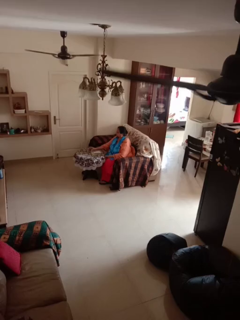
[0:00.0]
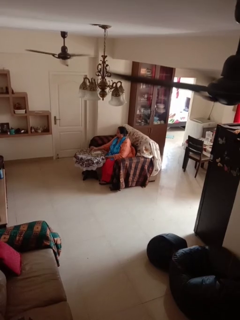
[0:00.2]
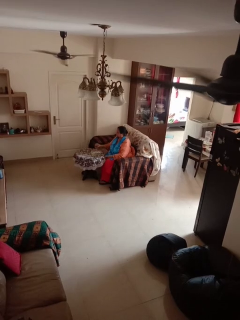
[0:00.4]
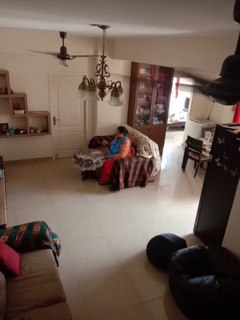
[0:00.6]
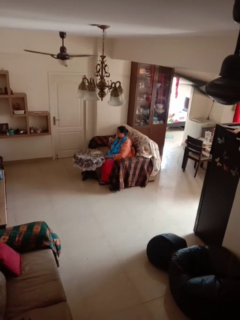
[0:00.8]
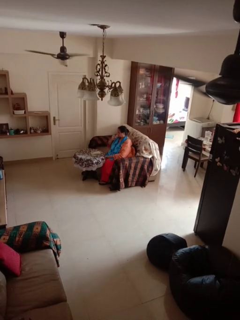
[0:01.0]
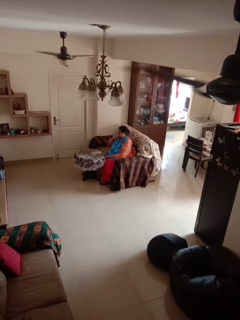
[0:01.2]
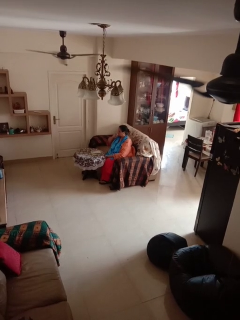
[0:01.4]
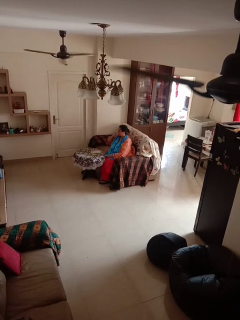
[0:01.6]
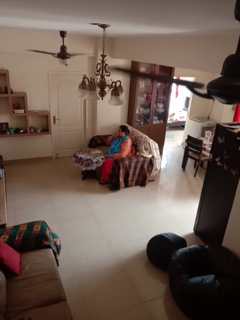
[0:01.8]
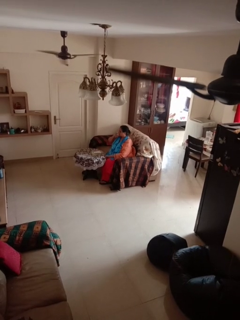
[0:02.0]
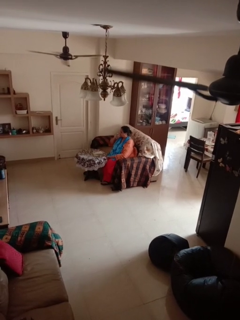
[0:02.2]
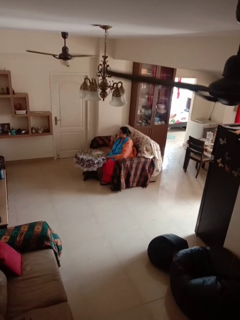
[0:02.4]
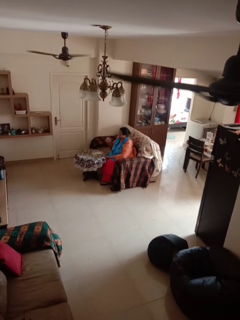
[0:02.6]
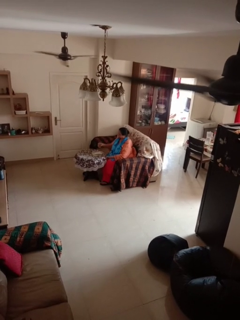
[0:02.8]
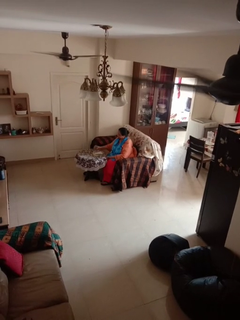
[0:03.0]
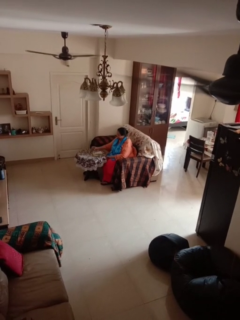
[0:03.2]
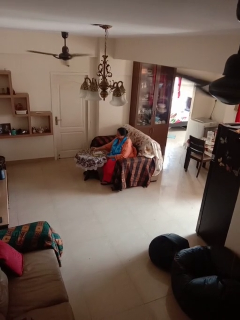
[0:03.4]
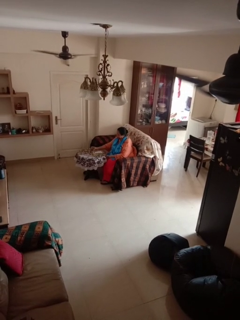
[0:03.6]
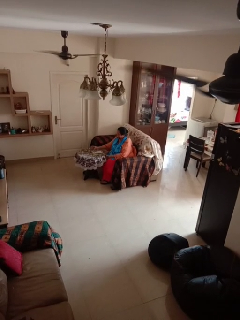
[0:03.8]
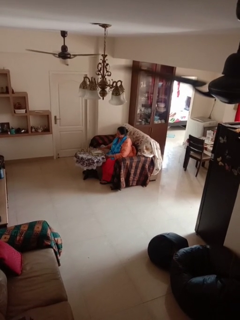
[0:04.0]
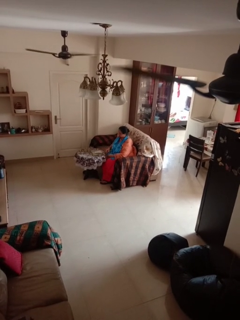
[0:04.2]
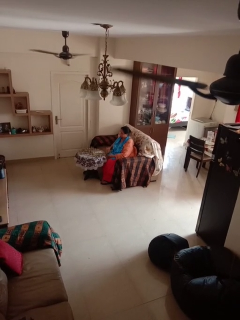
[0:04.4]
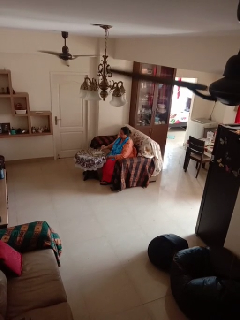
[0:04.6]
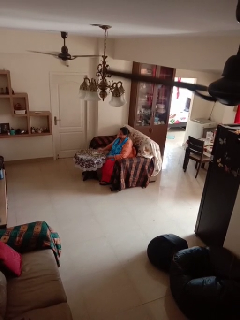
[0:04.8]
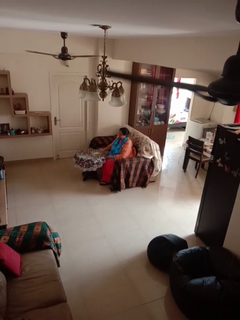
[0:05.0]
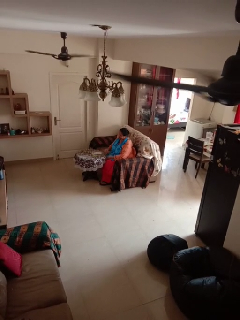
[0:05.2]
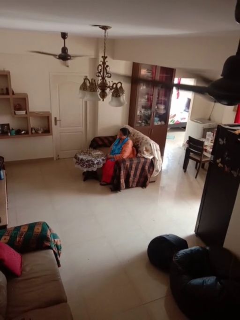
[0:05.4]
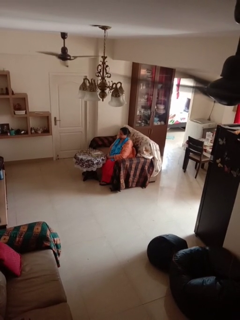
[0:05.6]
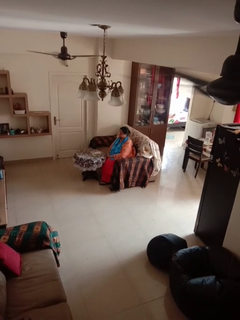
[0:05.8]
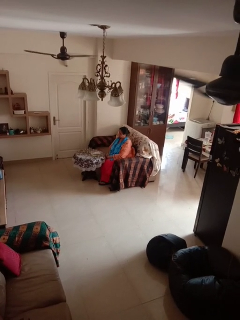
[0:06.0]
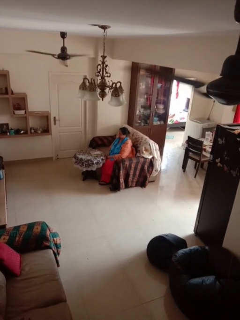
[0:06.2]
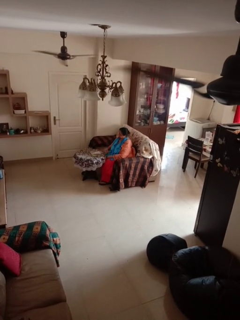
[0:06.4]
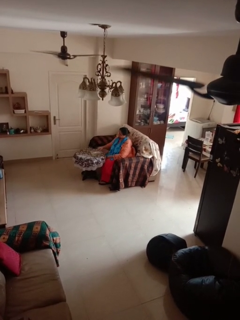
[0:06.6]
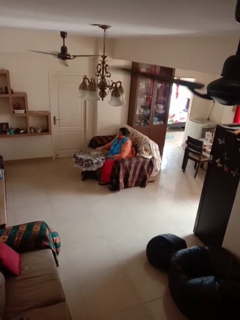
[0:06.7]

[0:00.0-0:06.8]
person drinks from cup

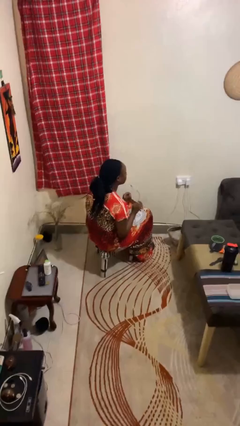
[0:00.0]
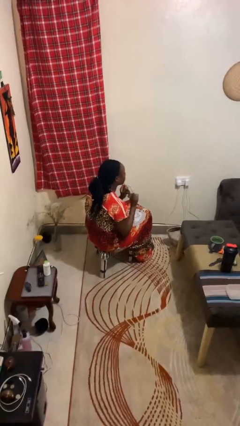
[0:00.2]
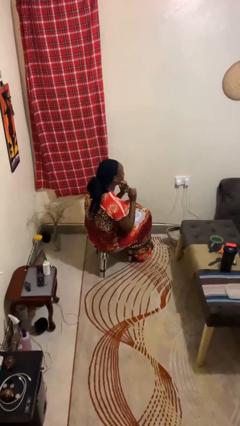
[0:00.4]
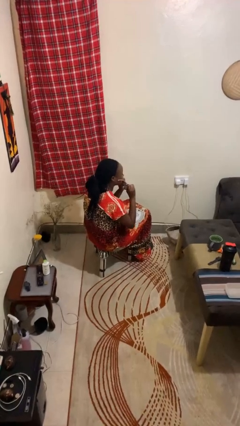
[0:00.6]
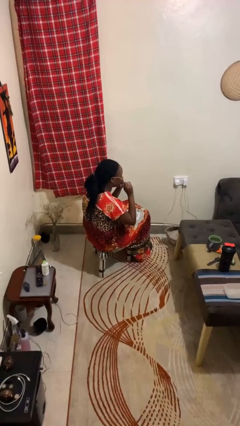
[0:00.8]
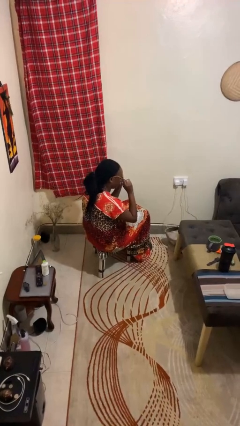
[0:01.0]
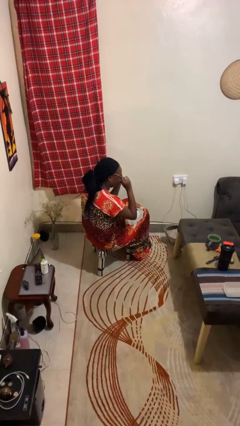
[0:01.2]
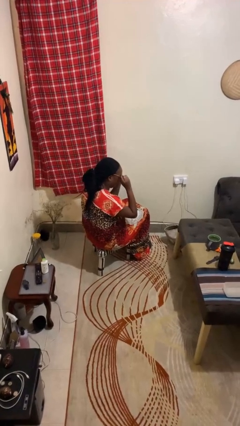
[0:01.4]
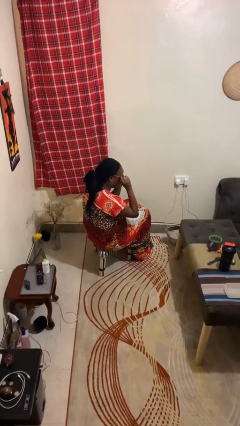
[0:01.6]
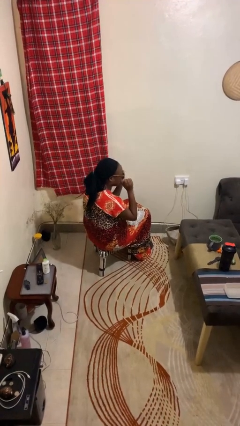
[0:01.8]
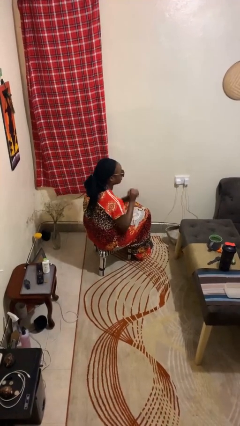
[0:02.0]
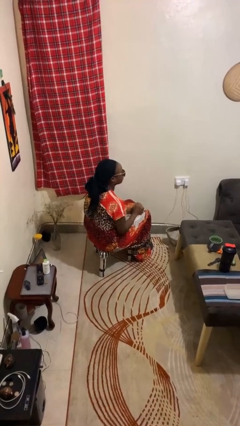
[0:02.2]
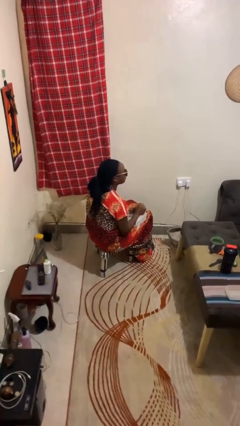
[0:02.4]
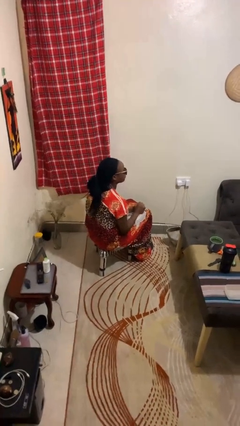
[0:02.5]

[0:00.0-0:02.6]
person puts on sunglasses

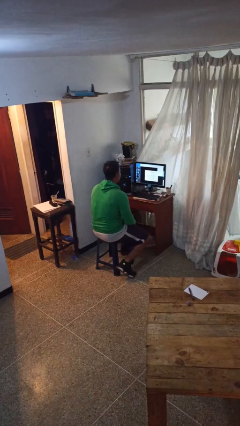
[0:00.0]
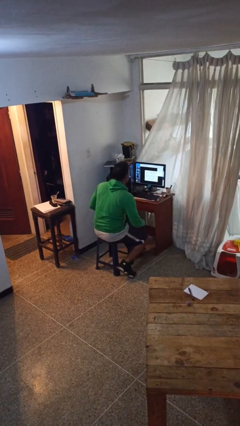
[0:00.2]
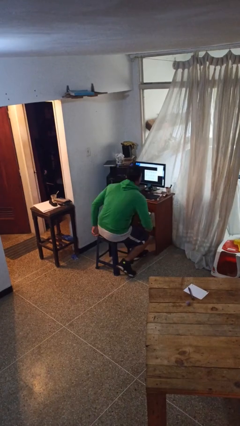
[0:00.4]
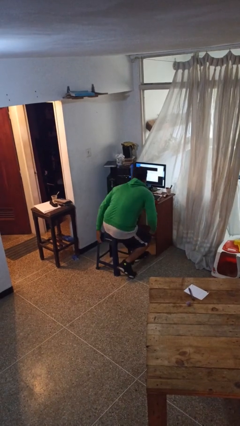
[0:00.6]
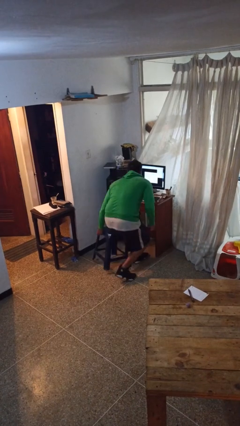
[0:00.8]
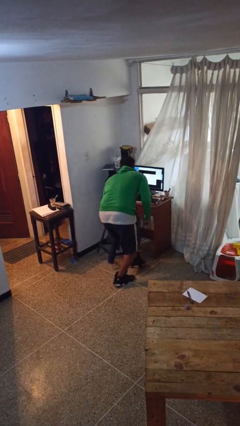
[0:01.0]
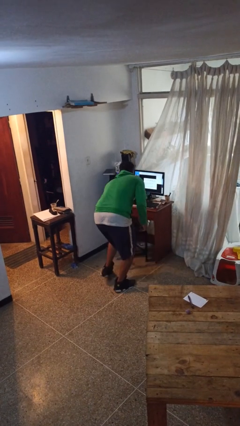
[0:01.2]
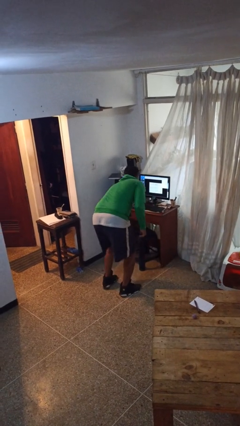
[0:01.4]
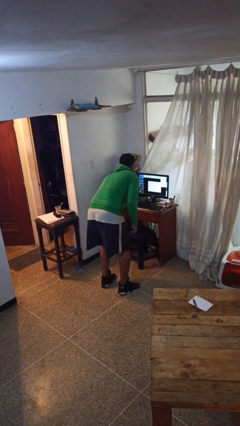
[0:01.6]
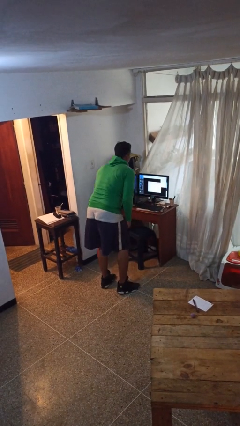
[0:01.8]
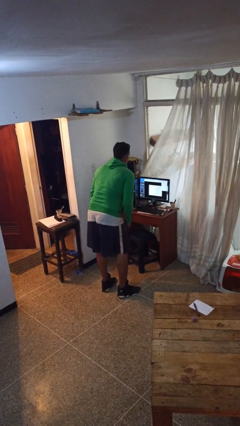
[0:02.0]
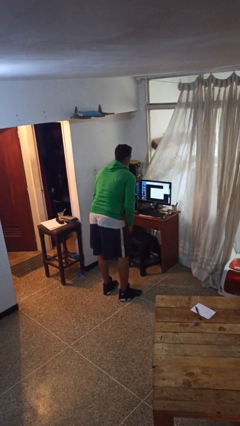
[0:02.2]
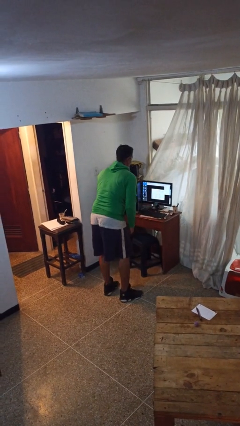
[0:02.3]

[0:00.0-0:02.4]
person stands up

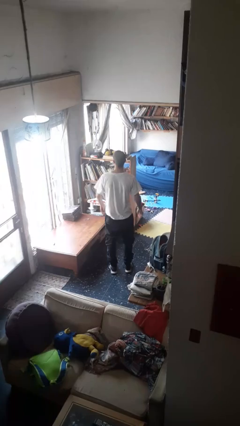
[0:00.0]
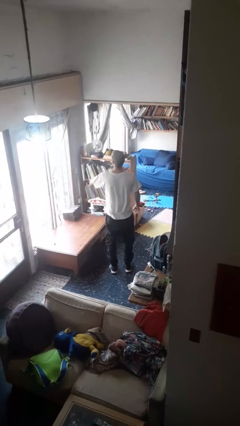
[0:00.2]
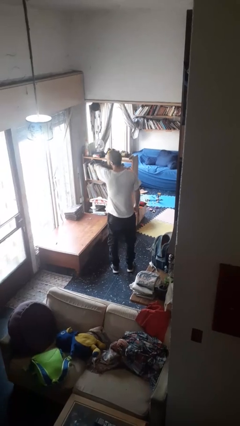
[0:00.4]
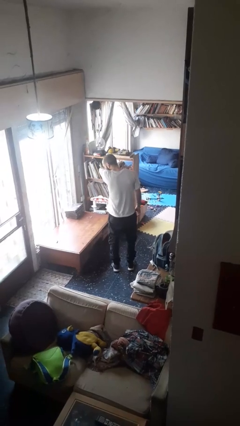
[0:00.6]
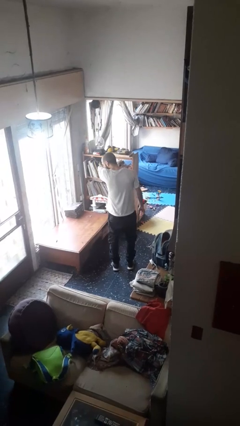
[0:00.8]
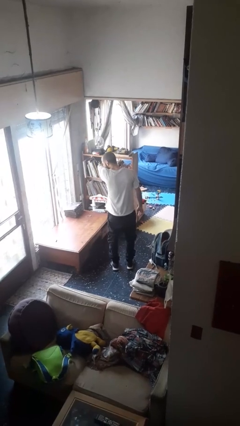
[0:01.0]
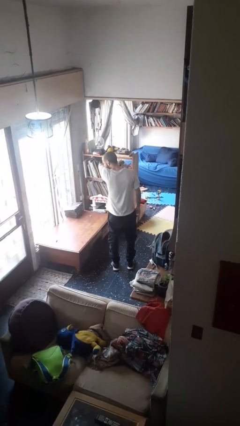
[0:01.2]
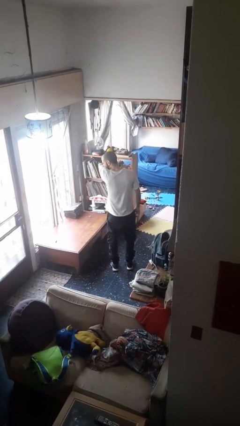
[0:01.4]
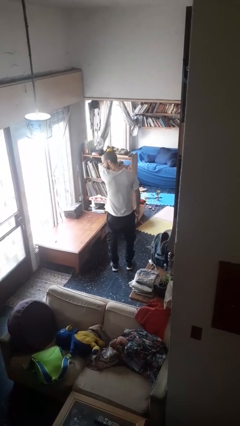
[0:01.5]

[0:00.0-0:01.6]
person sneezes into arm

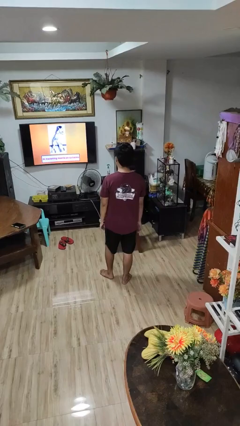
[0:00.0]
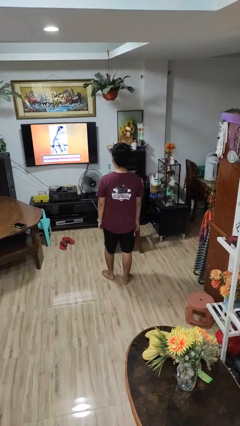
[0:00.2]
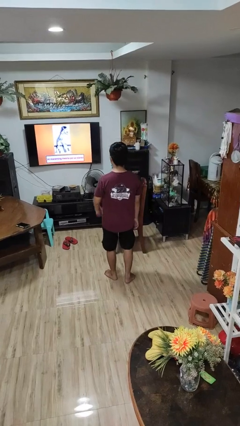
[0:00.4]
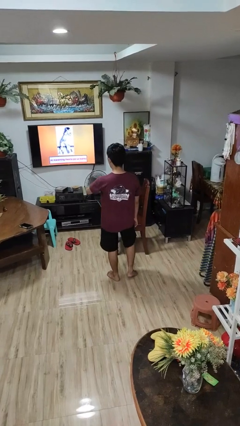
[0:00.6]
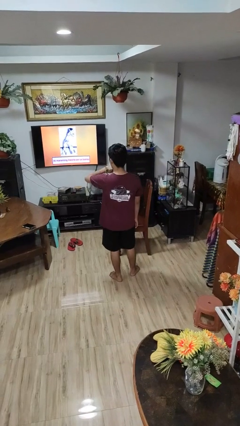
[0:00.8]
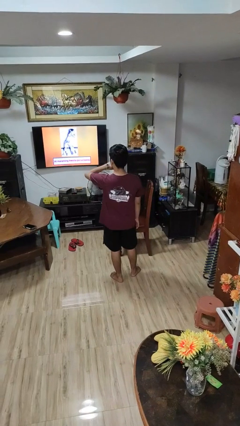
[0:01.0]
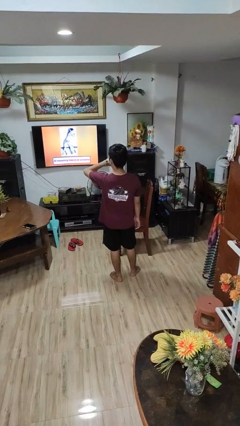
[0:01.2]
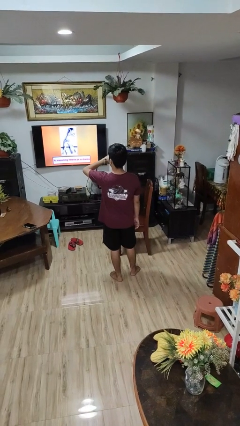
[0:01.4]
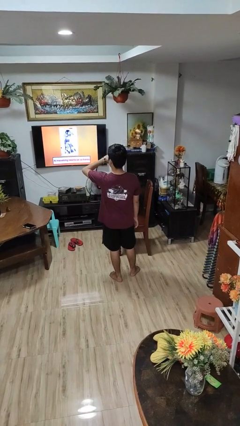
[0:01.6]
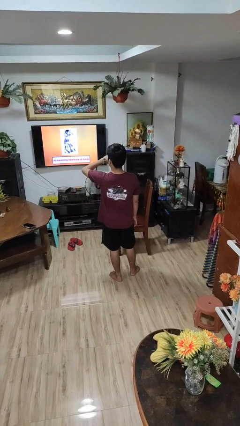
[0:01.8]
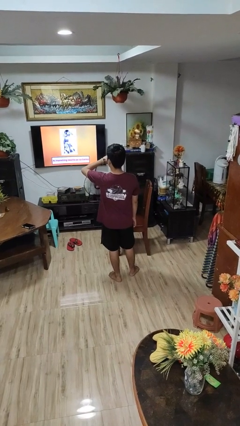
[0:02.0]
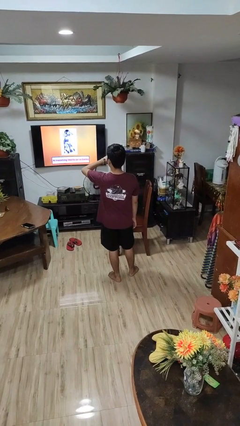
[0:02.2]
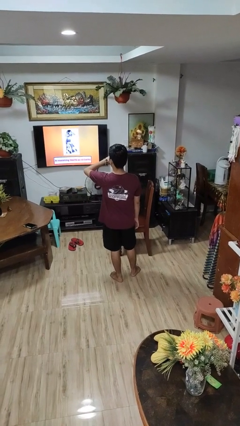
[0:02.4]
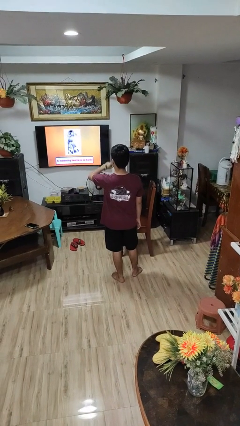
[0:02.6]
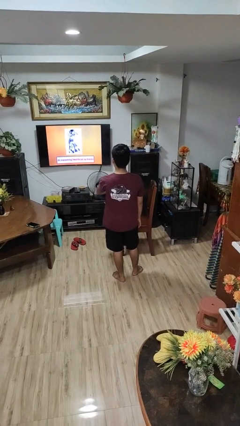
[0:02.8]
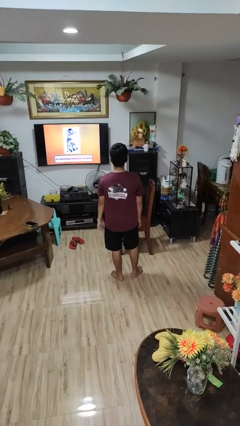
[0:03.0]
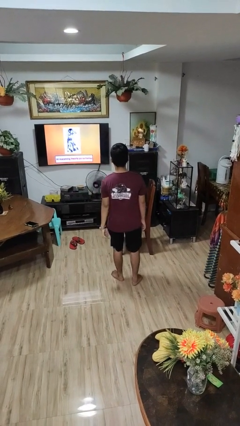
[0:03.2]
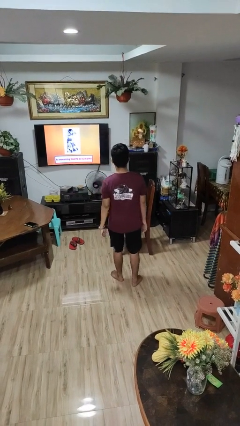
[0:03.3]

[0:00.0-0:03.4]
person looks at wristwatch

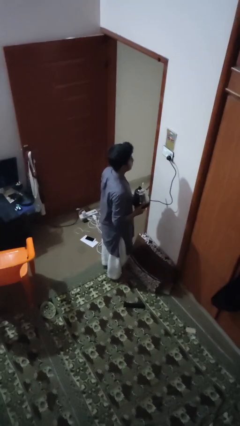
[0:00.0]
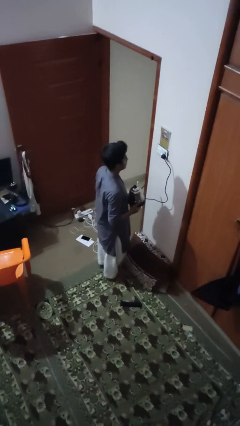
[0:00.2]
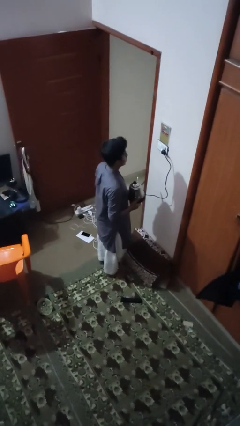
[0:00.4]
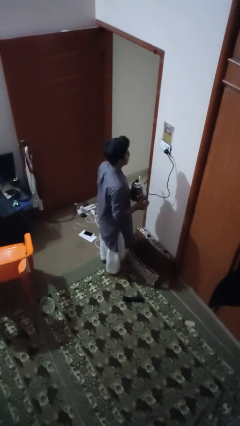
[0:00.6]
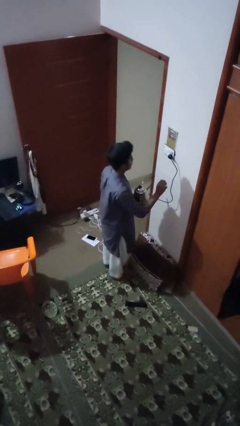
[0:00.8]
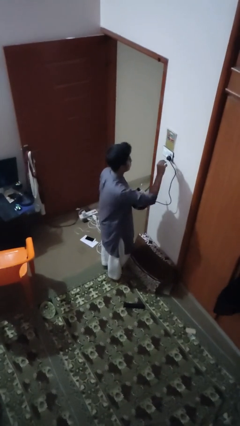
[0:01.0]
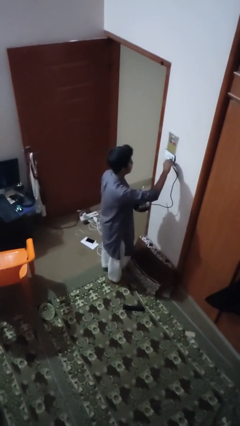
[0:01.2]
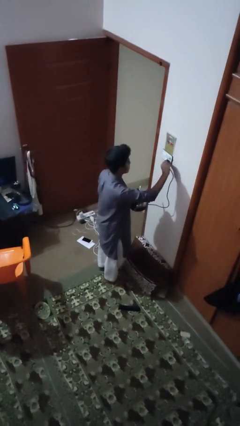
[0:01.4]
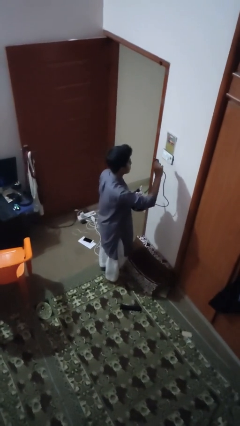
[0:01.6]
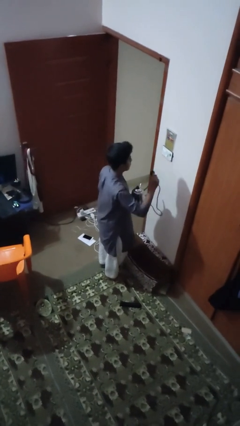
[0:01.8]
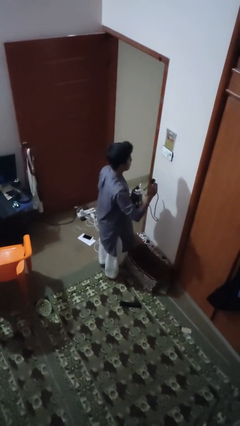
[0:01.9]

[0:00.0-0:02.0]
person unplugs from electrical socket
